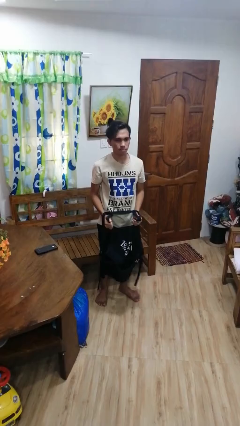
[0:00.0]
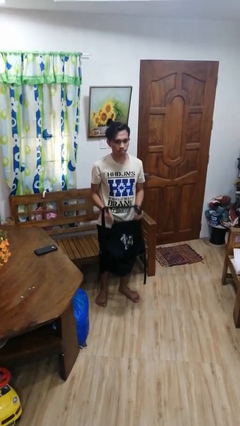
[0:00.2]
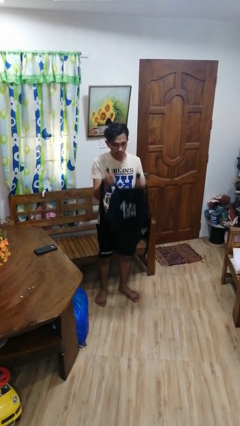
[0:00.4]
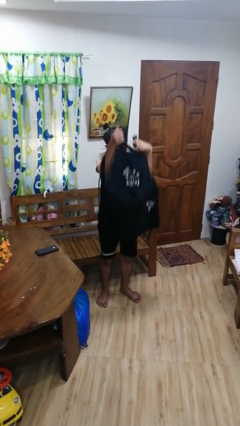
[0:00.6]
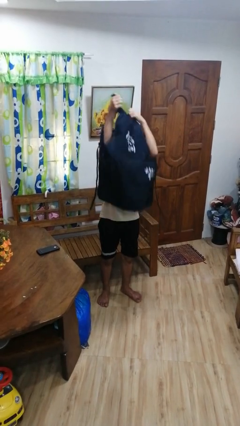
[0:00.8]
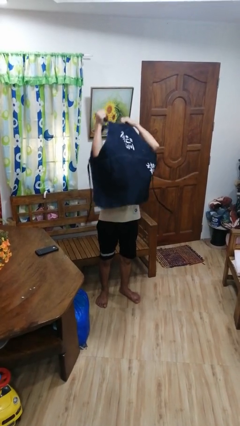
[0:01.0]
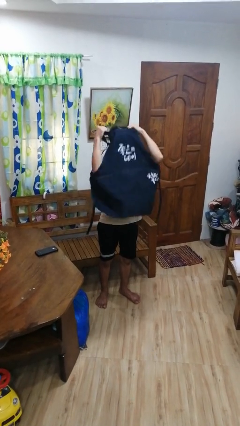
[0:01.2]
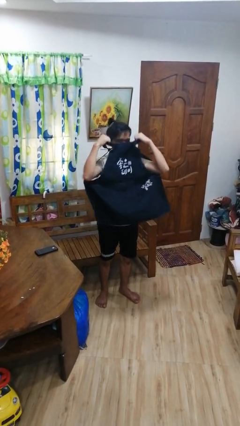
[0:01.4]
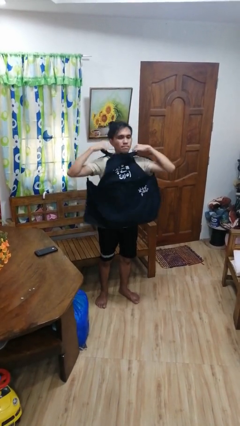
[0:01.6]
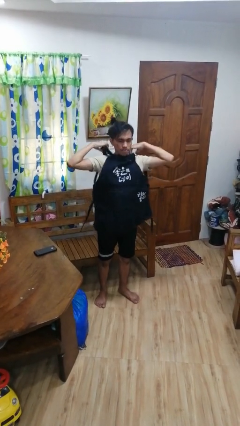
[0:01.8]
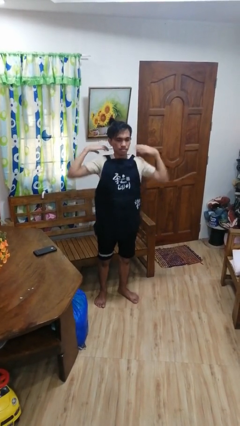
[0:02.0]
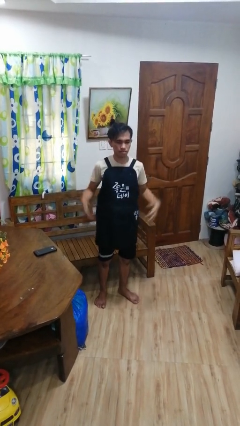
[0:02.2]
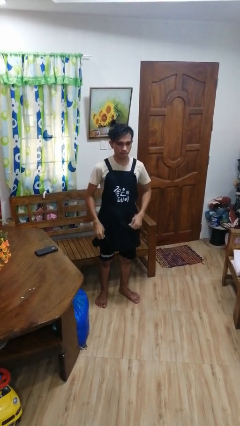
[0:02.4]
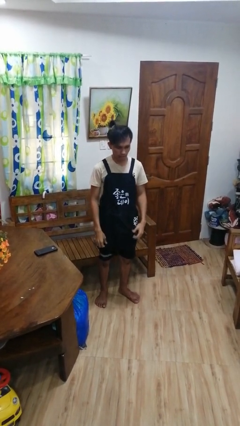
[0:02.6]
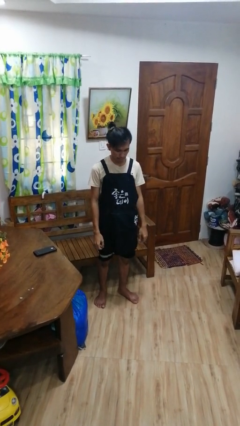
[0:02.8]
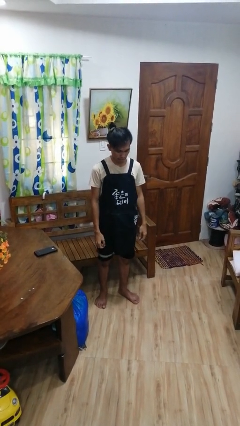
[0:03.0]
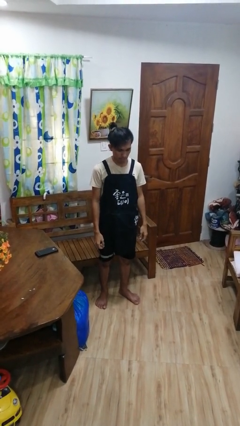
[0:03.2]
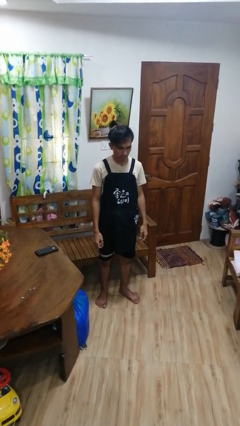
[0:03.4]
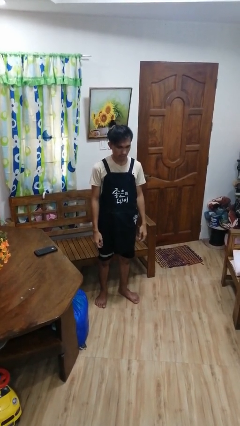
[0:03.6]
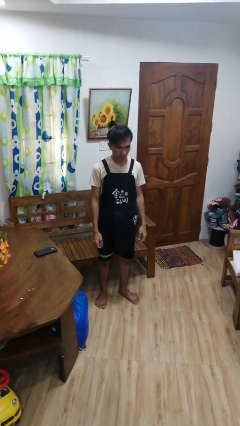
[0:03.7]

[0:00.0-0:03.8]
person puts on apron

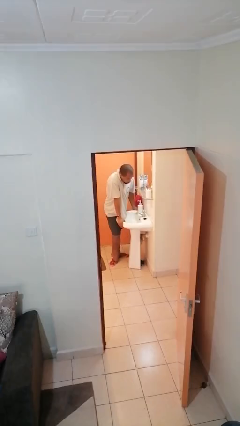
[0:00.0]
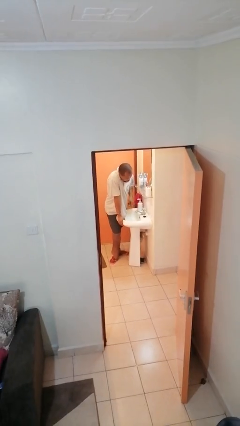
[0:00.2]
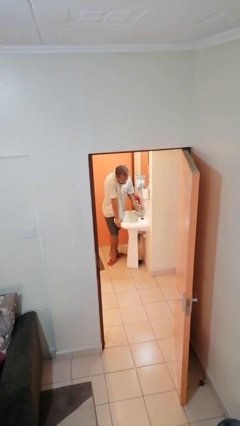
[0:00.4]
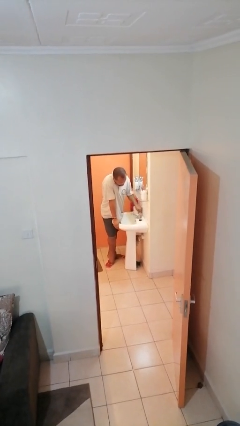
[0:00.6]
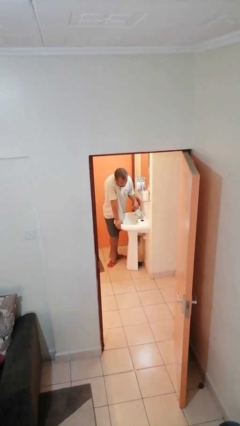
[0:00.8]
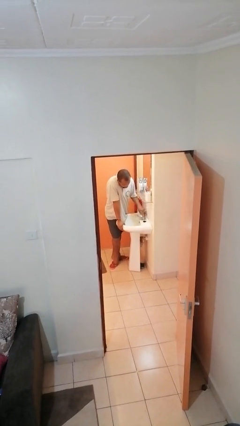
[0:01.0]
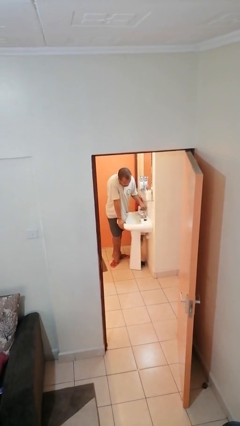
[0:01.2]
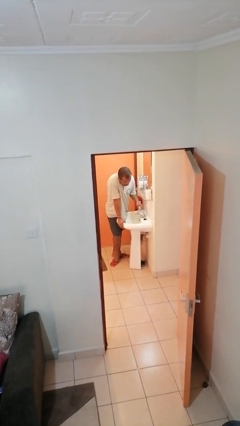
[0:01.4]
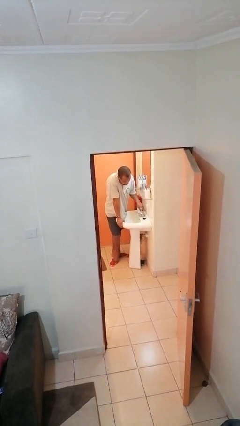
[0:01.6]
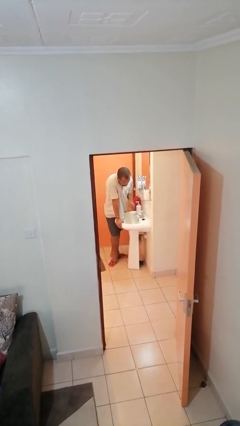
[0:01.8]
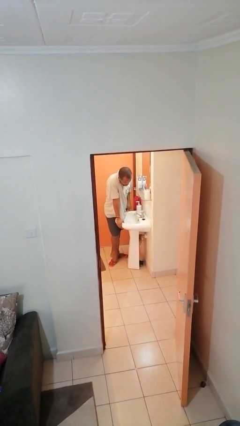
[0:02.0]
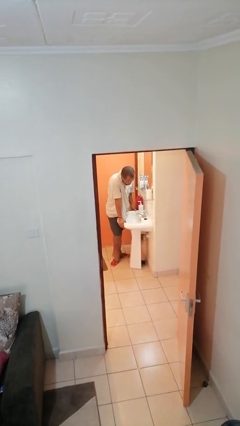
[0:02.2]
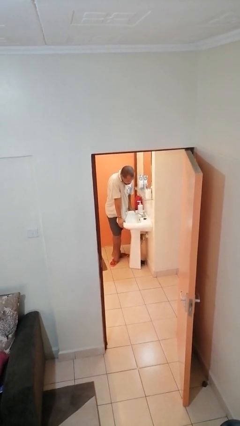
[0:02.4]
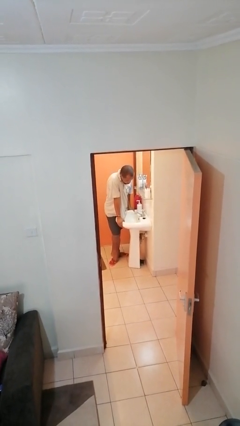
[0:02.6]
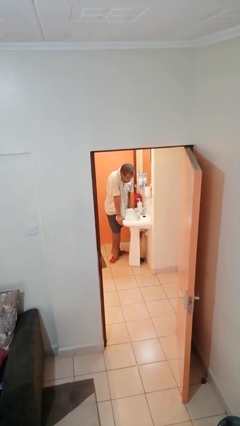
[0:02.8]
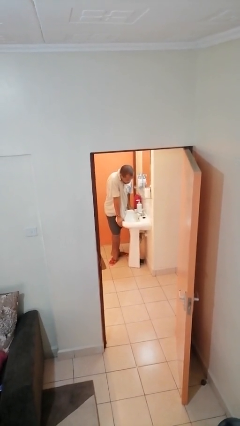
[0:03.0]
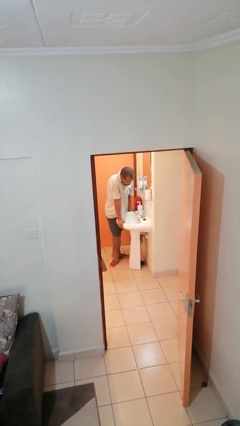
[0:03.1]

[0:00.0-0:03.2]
person turns on faucet

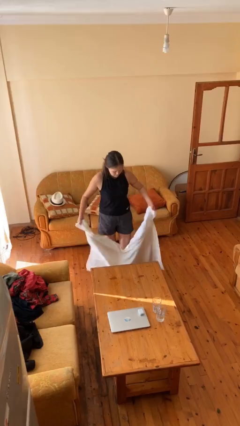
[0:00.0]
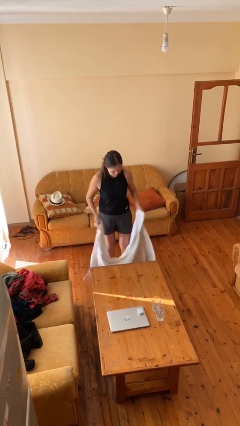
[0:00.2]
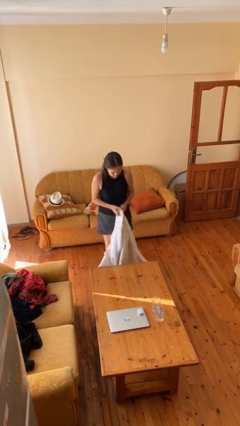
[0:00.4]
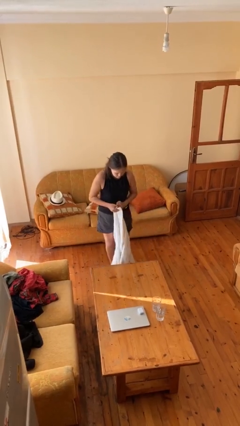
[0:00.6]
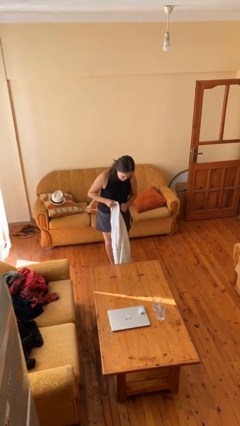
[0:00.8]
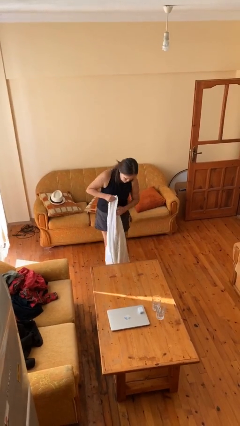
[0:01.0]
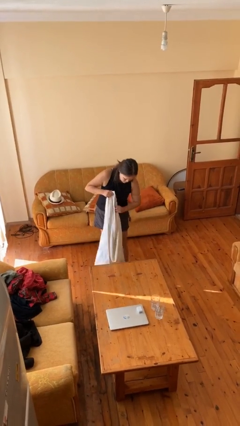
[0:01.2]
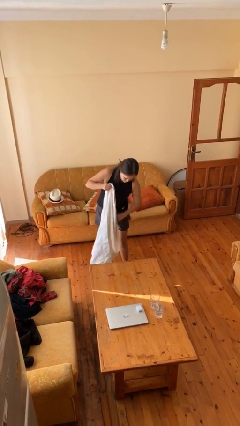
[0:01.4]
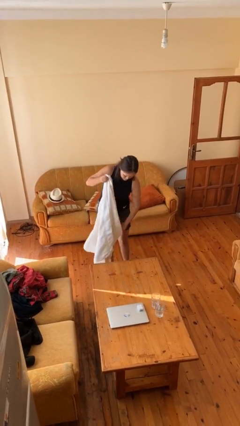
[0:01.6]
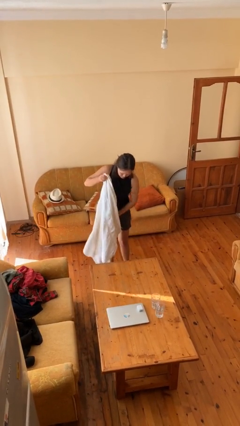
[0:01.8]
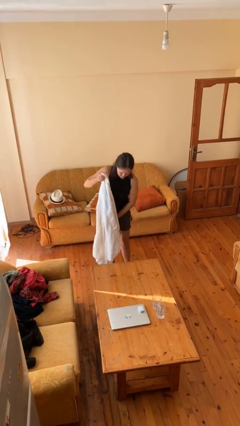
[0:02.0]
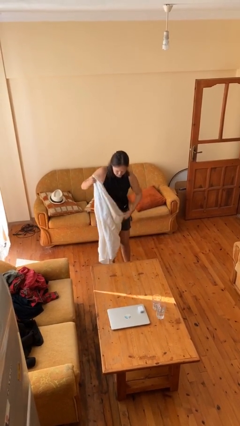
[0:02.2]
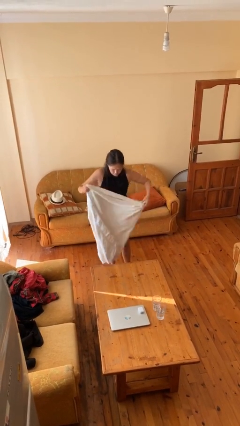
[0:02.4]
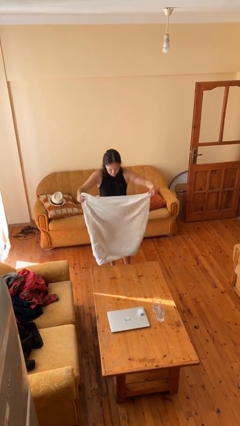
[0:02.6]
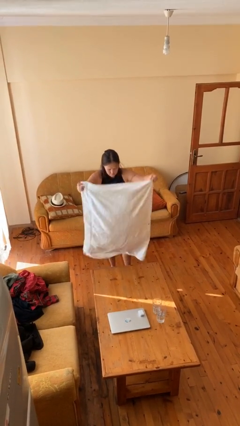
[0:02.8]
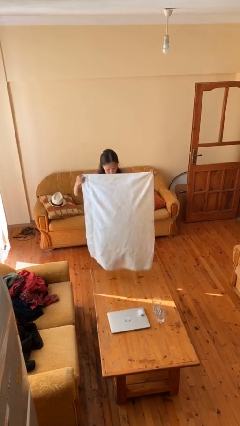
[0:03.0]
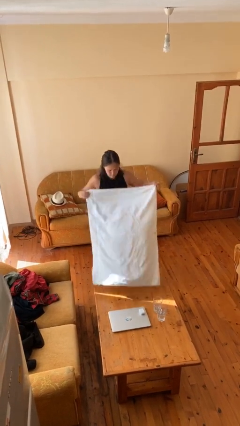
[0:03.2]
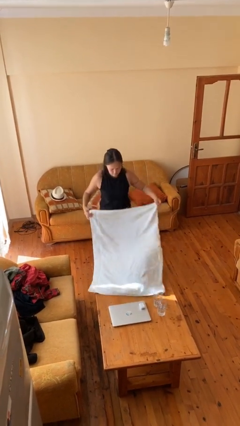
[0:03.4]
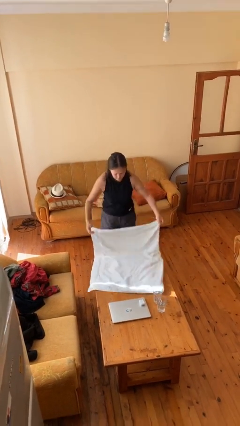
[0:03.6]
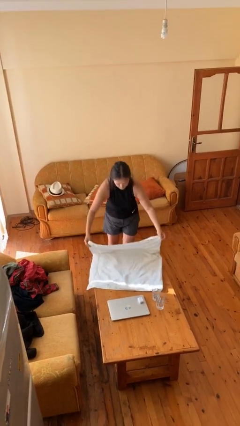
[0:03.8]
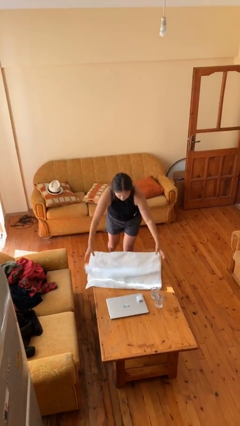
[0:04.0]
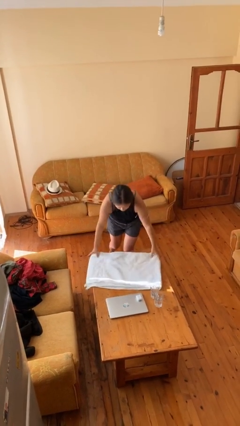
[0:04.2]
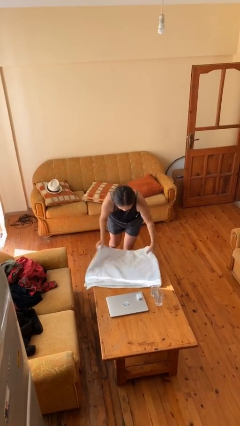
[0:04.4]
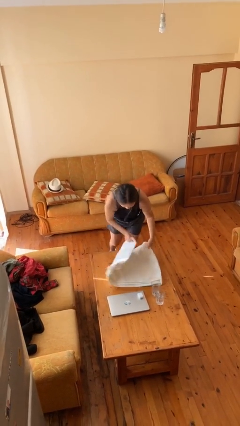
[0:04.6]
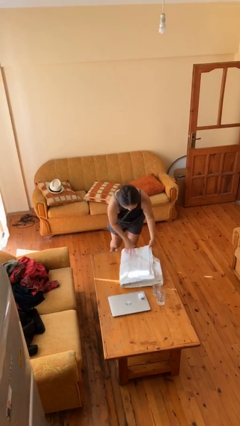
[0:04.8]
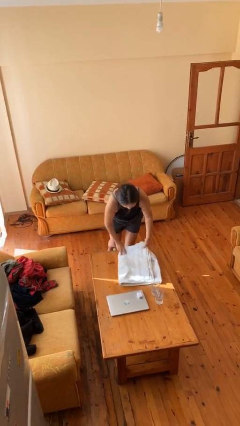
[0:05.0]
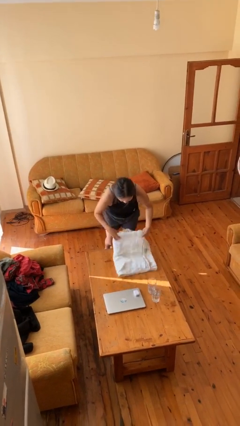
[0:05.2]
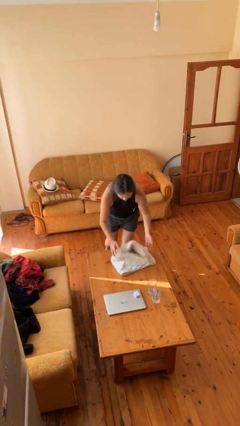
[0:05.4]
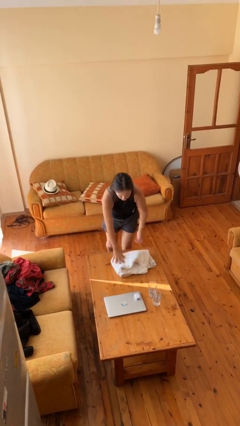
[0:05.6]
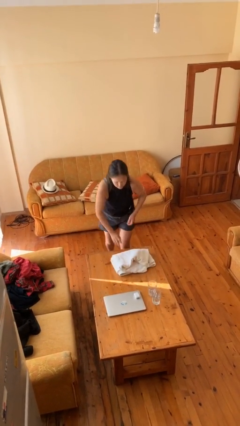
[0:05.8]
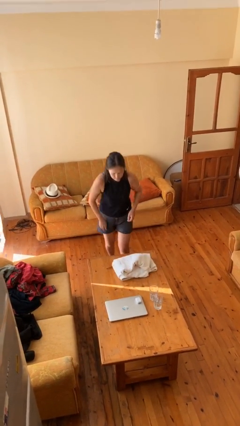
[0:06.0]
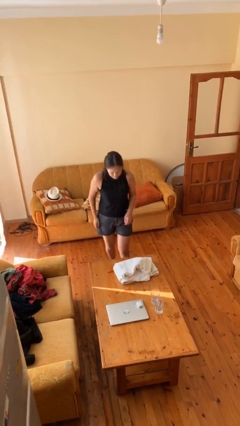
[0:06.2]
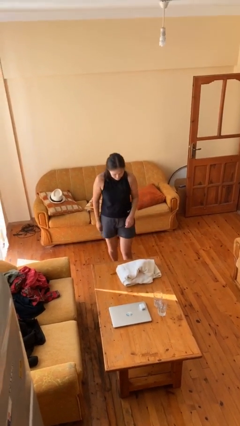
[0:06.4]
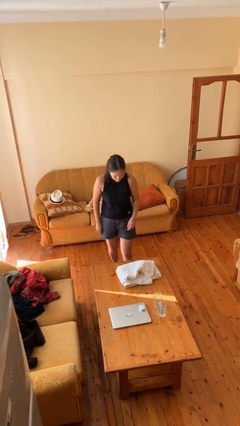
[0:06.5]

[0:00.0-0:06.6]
person folds towel

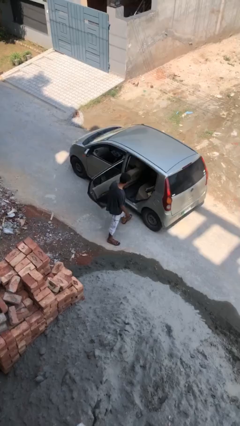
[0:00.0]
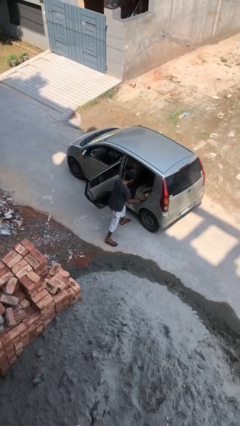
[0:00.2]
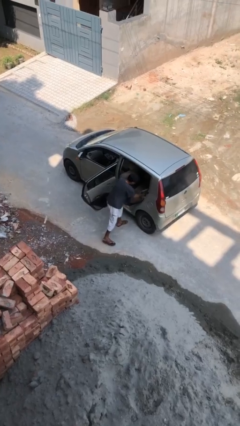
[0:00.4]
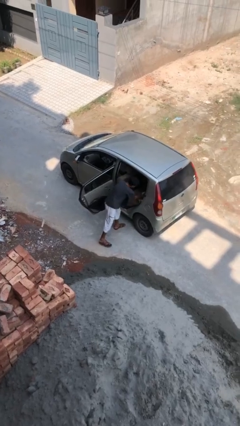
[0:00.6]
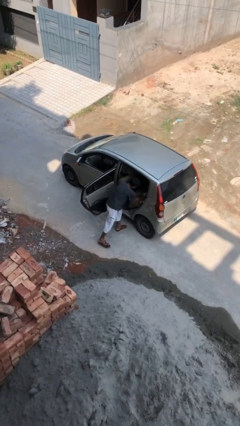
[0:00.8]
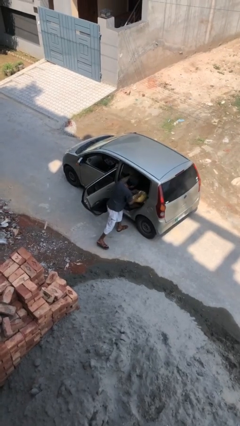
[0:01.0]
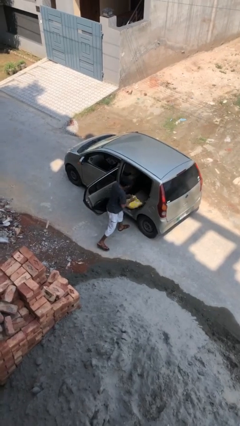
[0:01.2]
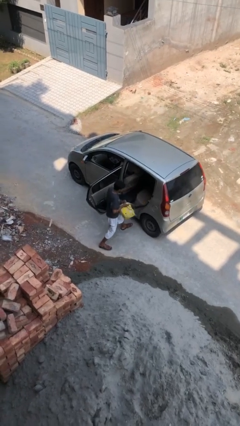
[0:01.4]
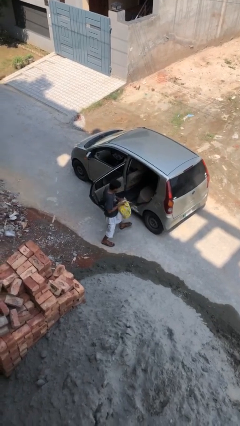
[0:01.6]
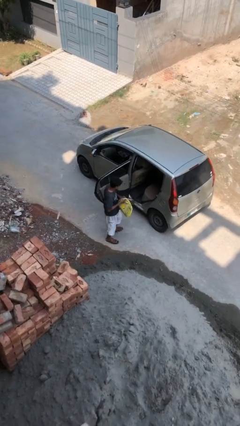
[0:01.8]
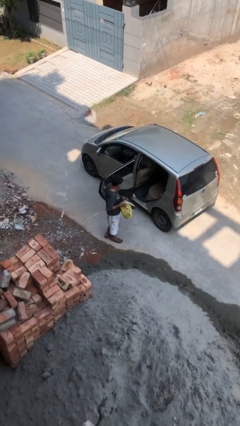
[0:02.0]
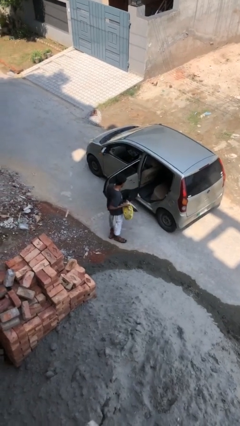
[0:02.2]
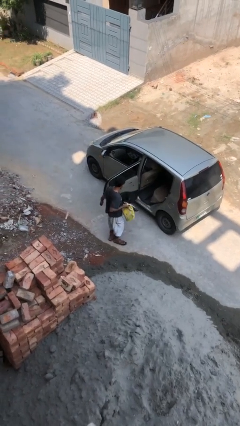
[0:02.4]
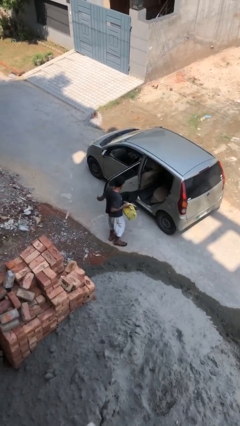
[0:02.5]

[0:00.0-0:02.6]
person unloads car

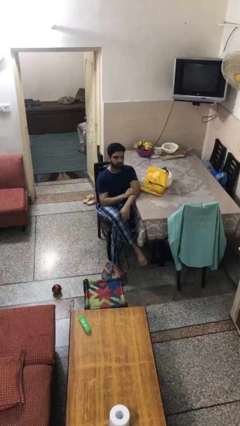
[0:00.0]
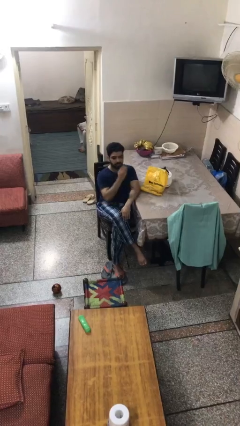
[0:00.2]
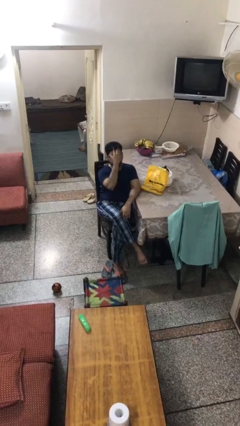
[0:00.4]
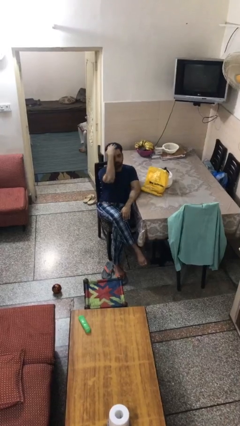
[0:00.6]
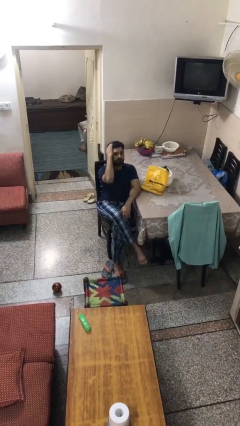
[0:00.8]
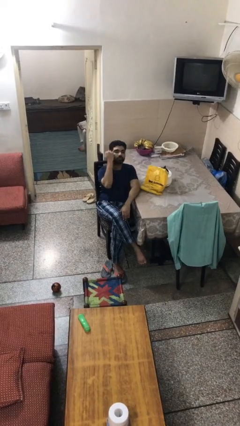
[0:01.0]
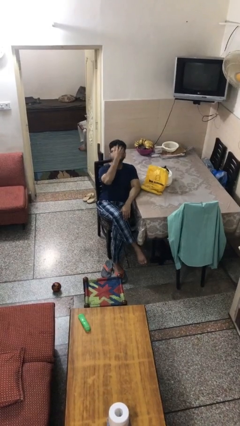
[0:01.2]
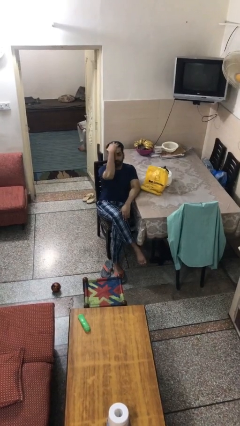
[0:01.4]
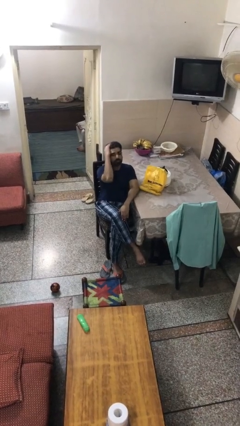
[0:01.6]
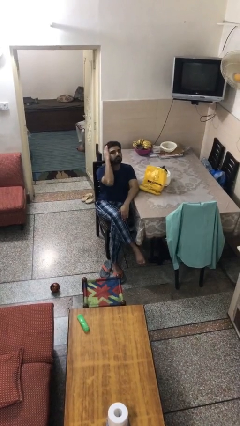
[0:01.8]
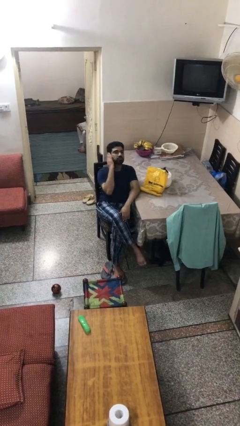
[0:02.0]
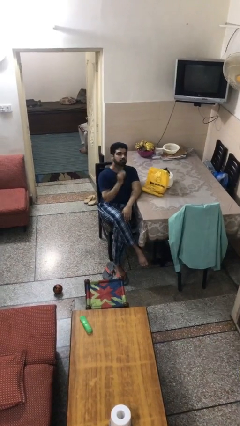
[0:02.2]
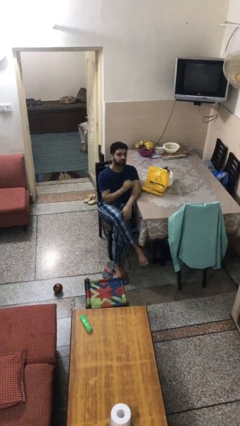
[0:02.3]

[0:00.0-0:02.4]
person strokes hair
